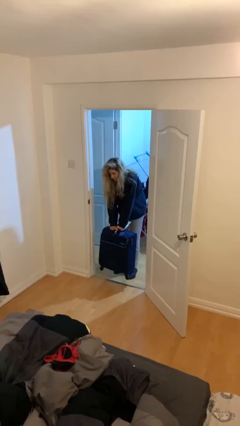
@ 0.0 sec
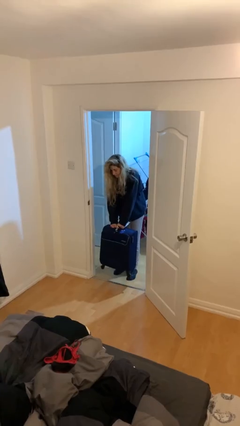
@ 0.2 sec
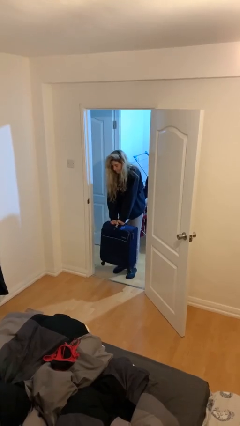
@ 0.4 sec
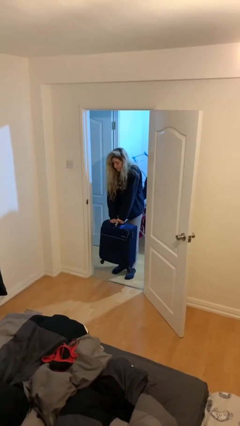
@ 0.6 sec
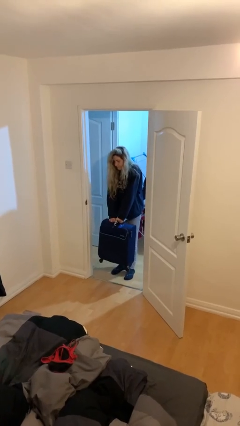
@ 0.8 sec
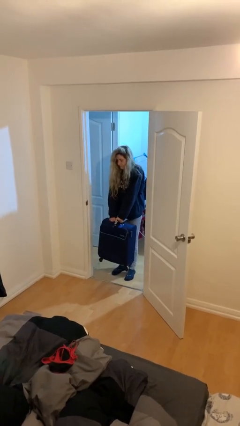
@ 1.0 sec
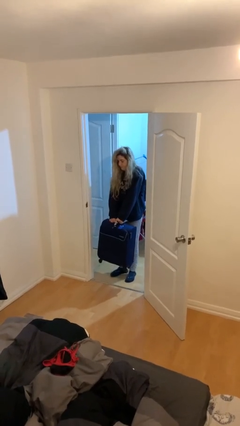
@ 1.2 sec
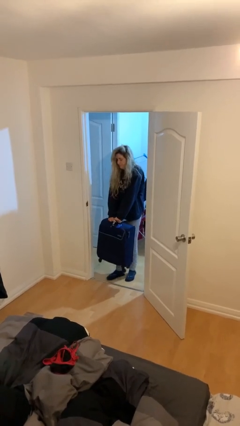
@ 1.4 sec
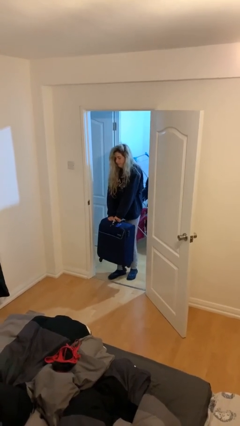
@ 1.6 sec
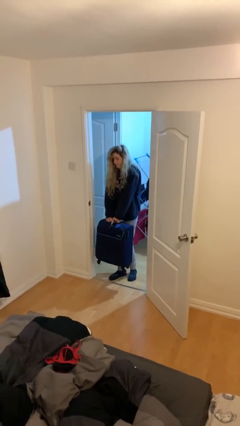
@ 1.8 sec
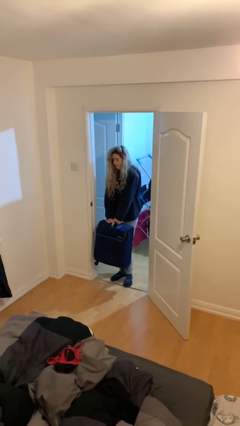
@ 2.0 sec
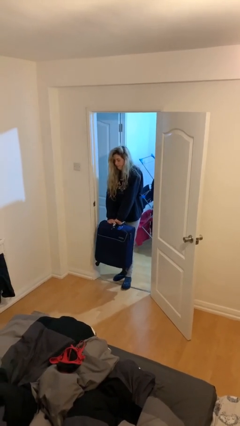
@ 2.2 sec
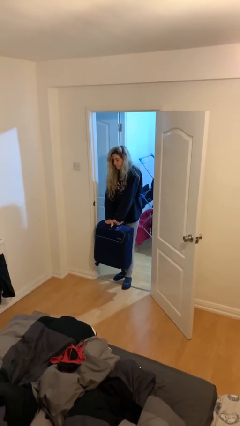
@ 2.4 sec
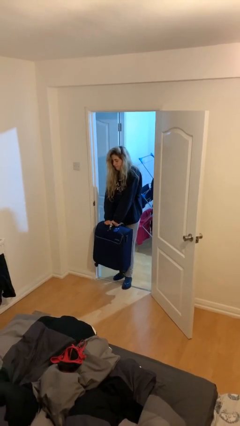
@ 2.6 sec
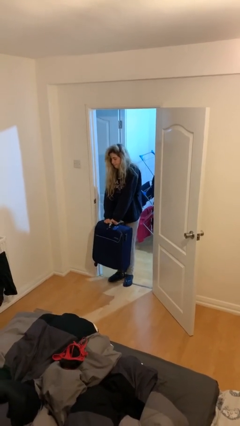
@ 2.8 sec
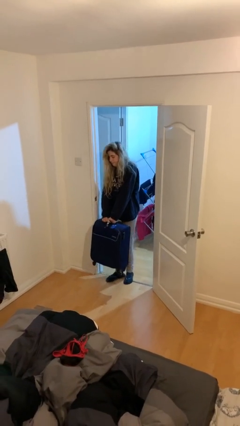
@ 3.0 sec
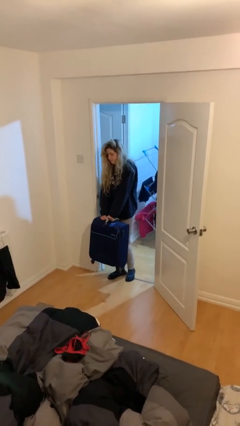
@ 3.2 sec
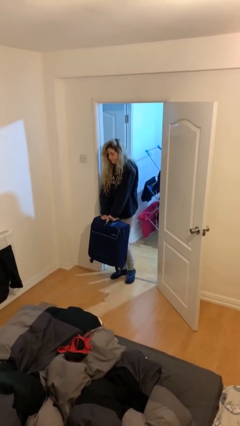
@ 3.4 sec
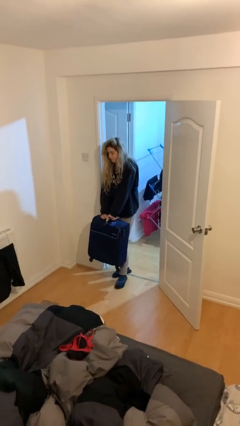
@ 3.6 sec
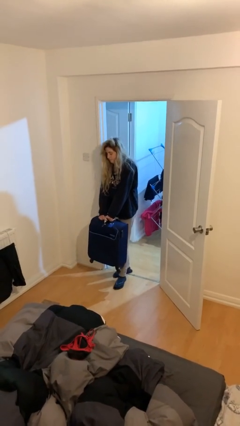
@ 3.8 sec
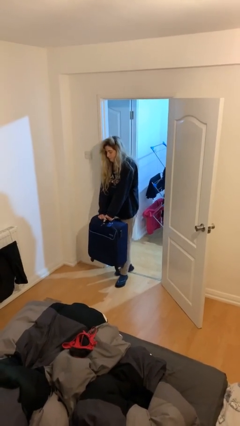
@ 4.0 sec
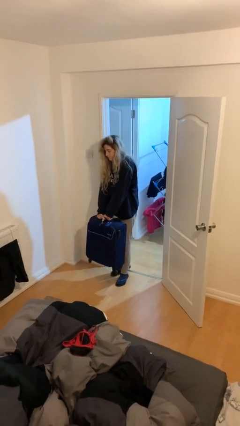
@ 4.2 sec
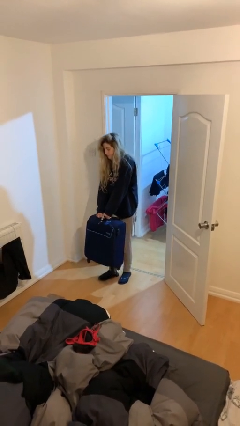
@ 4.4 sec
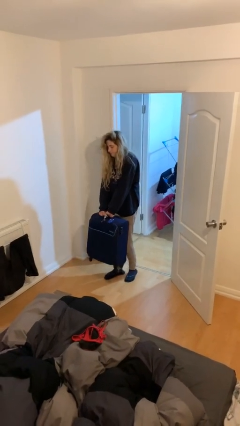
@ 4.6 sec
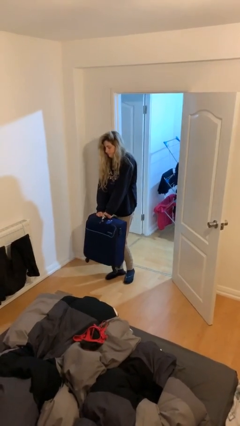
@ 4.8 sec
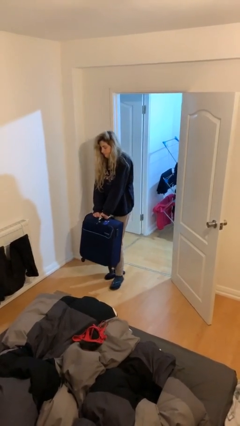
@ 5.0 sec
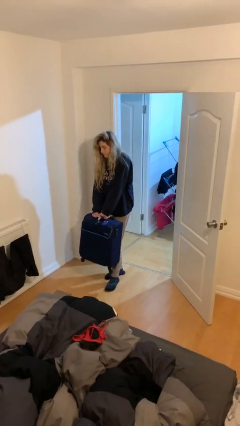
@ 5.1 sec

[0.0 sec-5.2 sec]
person carries heavy object

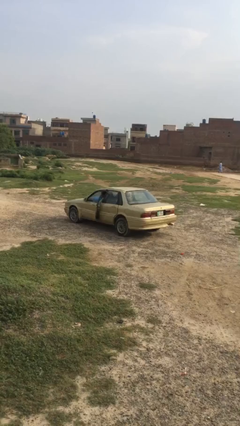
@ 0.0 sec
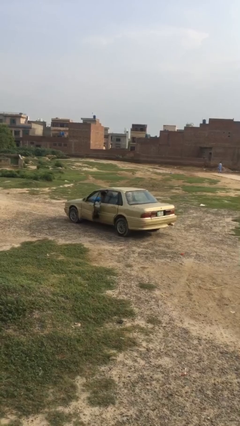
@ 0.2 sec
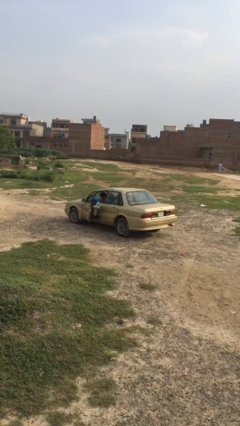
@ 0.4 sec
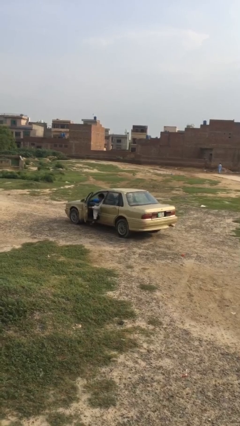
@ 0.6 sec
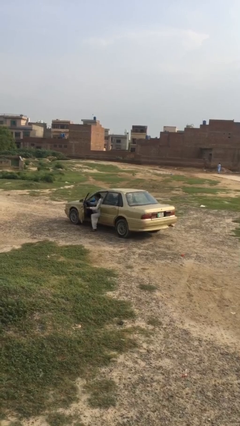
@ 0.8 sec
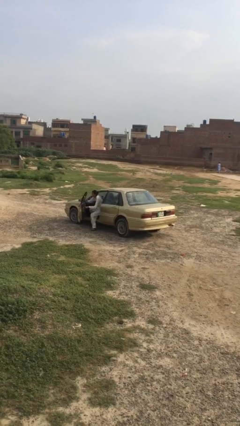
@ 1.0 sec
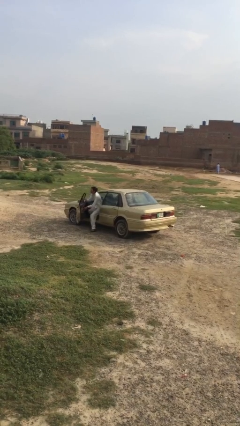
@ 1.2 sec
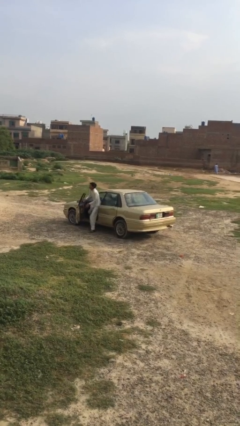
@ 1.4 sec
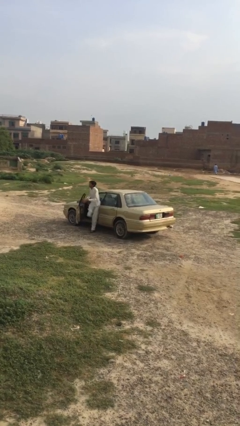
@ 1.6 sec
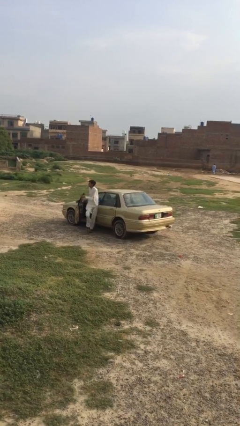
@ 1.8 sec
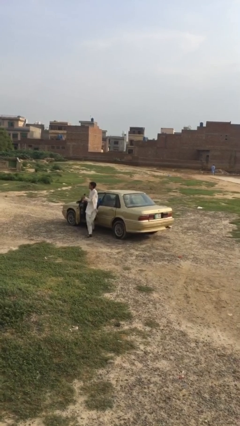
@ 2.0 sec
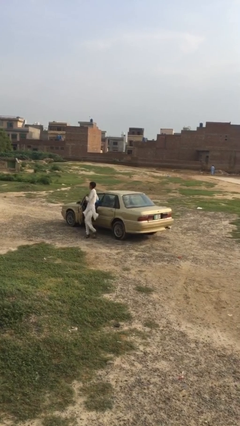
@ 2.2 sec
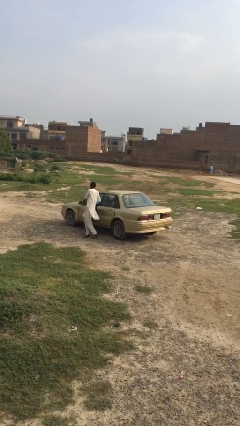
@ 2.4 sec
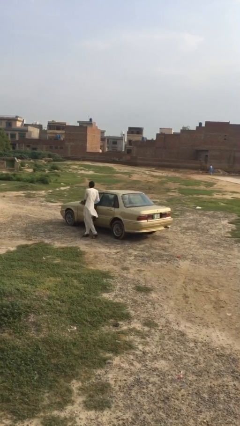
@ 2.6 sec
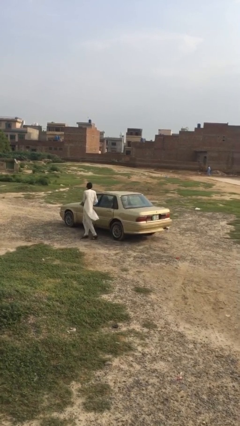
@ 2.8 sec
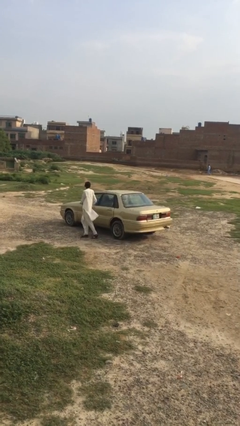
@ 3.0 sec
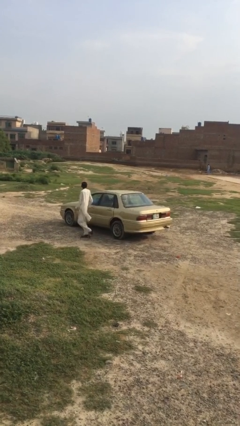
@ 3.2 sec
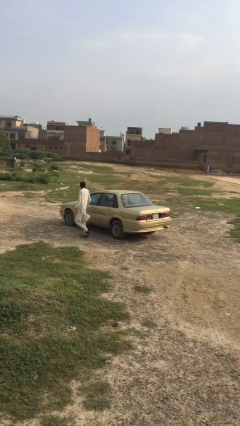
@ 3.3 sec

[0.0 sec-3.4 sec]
car drops off person

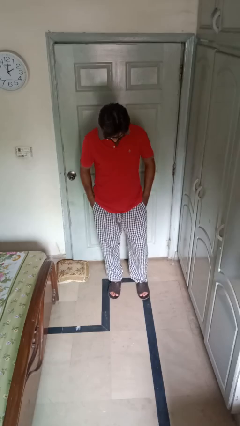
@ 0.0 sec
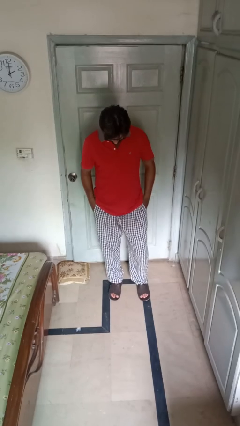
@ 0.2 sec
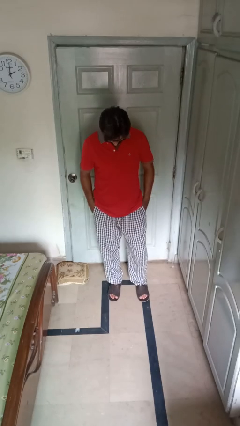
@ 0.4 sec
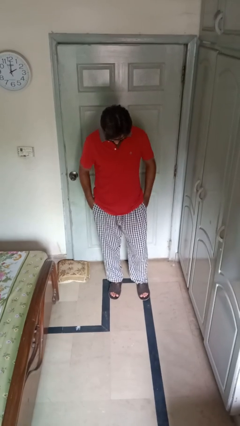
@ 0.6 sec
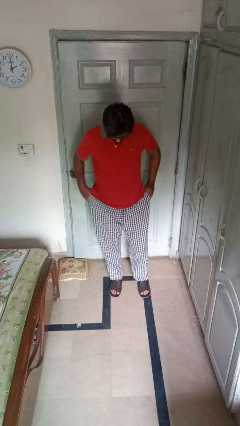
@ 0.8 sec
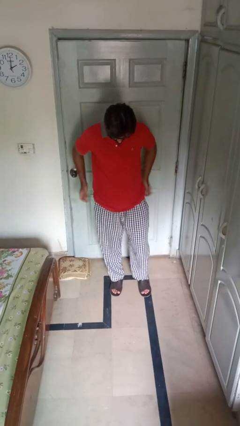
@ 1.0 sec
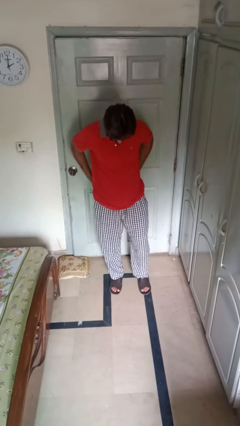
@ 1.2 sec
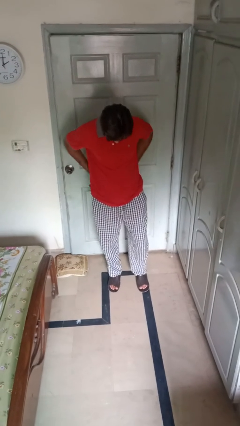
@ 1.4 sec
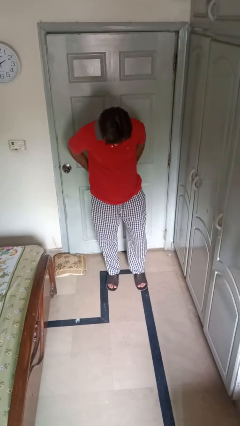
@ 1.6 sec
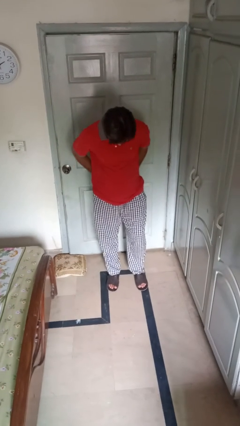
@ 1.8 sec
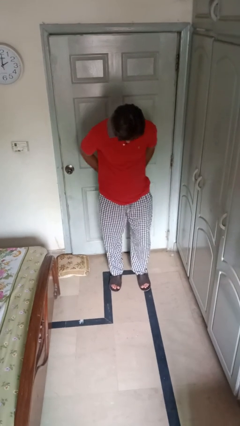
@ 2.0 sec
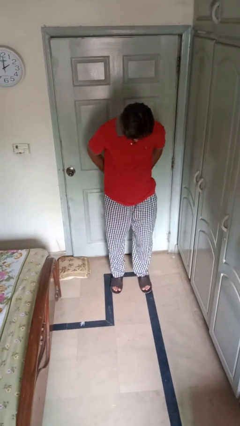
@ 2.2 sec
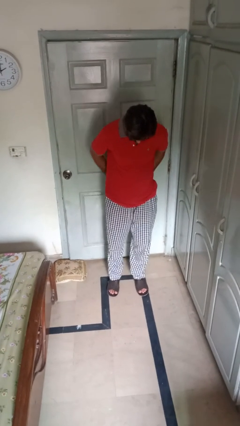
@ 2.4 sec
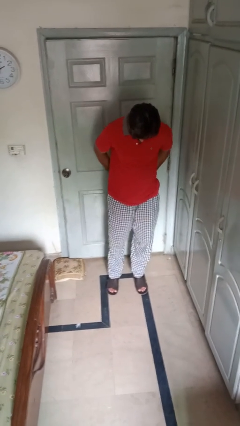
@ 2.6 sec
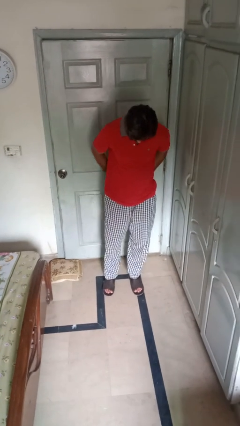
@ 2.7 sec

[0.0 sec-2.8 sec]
person puts hands in back pockets

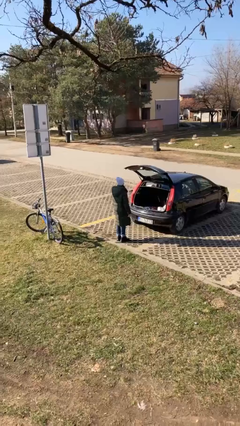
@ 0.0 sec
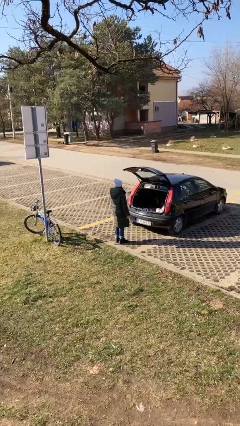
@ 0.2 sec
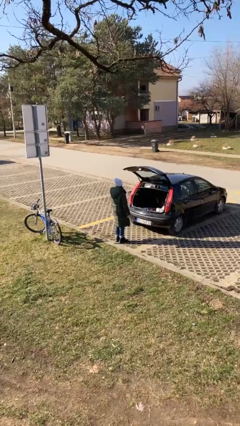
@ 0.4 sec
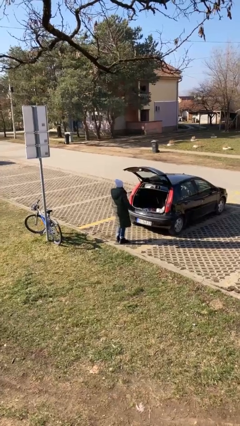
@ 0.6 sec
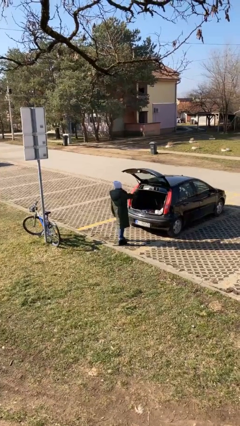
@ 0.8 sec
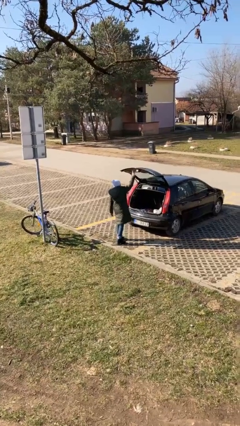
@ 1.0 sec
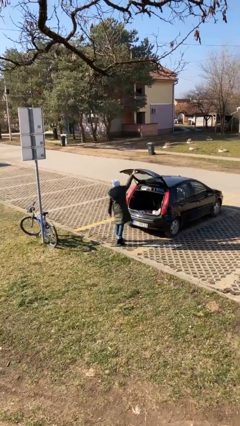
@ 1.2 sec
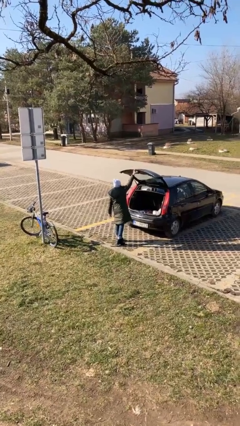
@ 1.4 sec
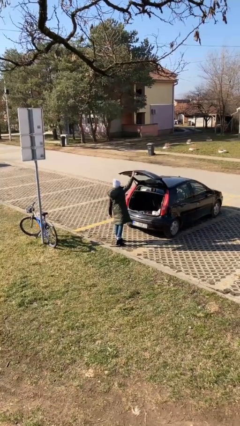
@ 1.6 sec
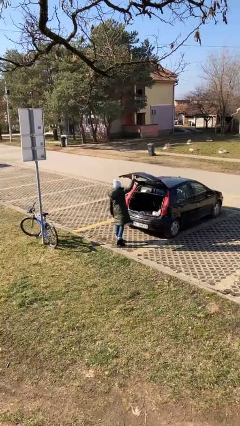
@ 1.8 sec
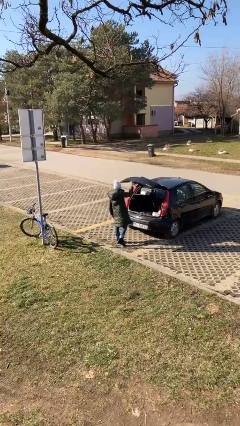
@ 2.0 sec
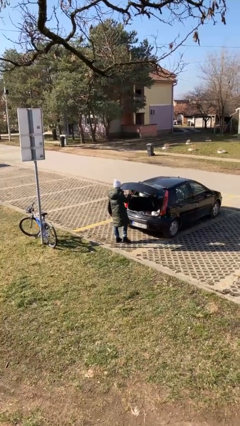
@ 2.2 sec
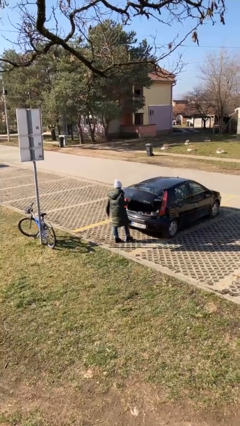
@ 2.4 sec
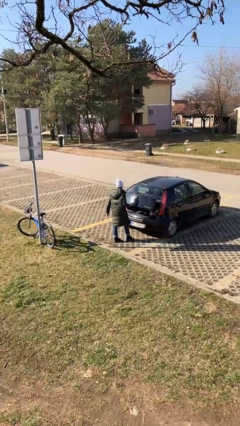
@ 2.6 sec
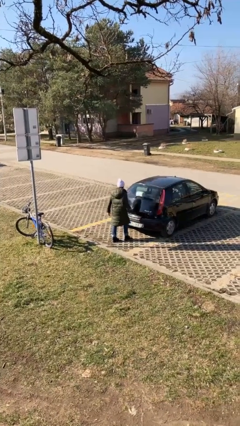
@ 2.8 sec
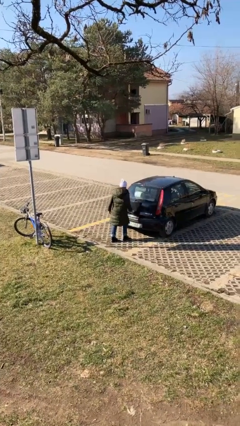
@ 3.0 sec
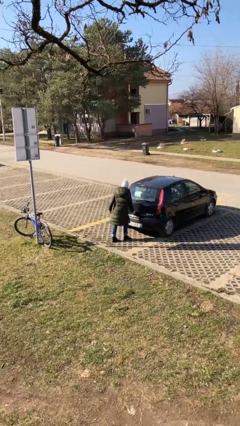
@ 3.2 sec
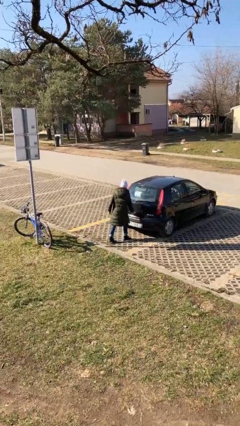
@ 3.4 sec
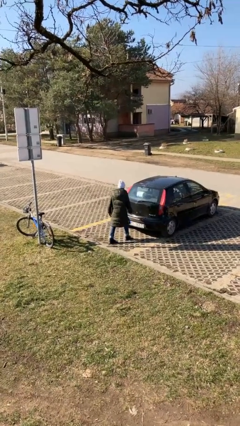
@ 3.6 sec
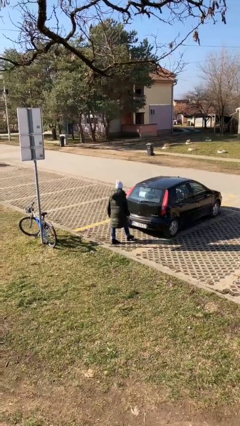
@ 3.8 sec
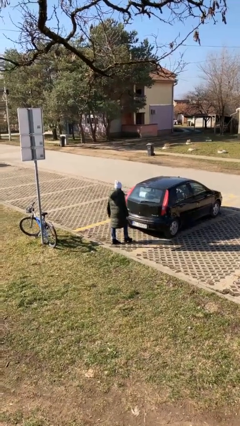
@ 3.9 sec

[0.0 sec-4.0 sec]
person closes car trunk

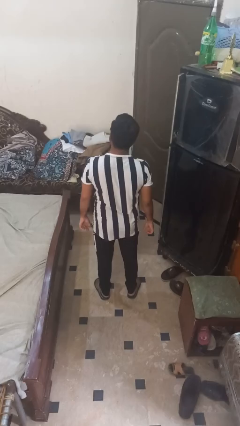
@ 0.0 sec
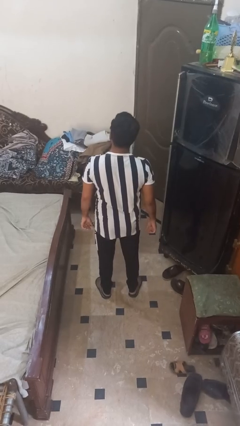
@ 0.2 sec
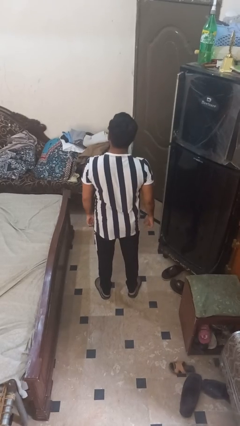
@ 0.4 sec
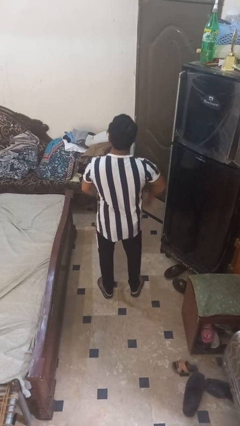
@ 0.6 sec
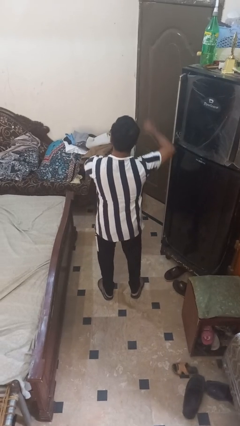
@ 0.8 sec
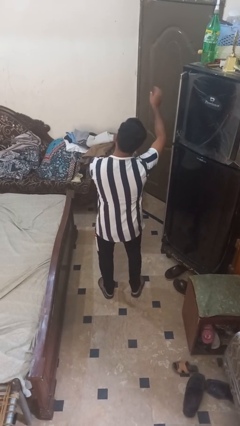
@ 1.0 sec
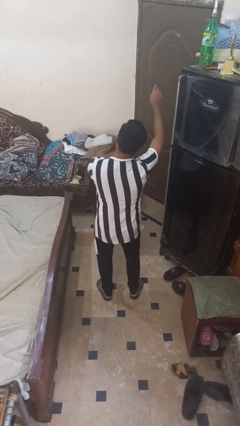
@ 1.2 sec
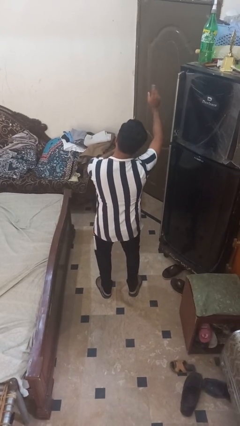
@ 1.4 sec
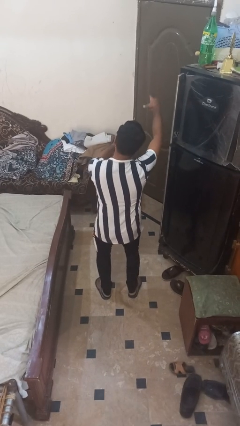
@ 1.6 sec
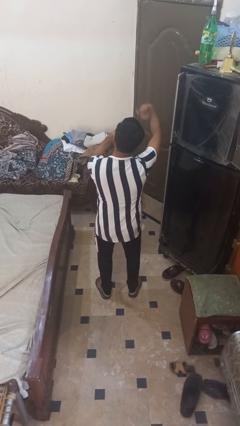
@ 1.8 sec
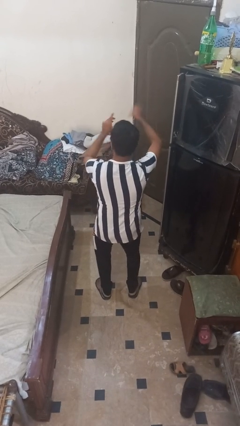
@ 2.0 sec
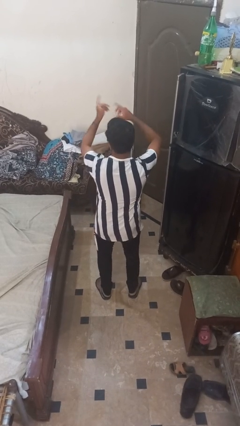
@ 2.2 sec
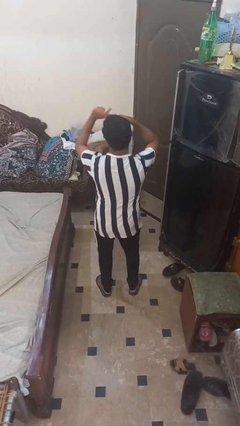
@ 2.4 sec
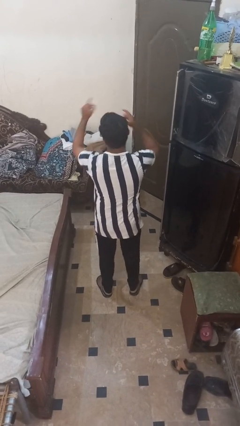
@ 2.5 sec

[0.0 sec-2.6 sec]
person dances in place
